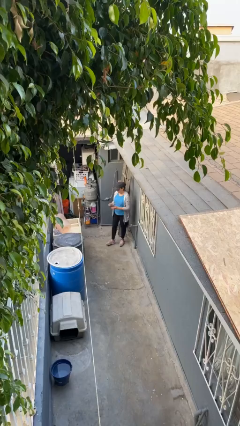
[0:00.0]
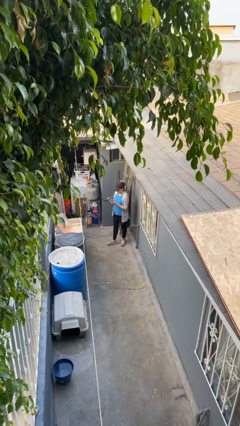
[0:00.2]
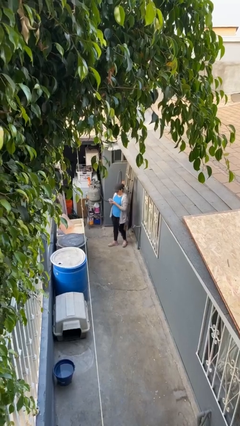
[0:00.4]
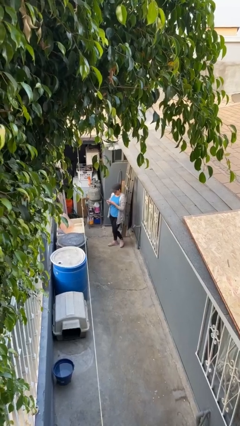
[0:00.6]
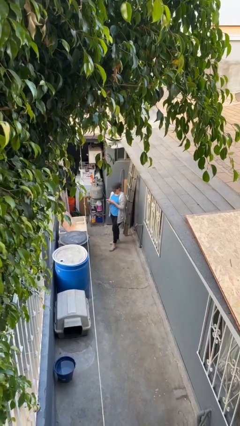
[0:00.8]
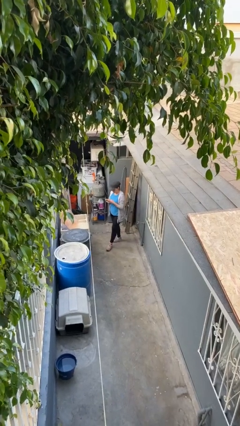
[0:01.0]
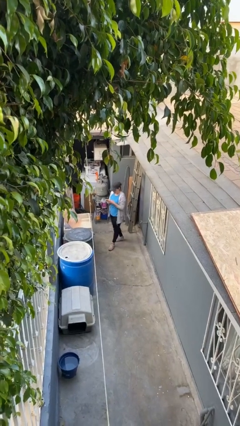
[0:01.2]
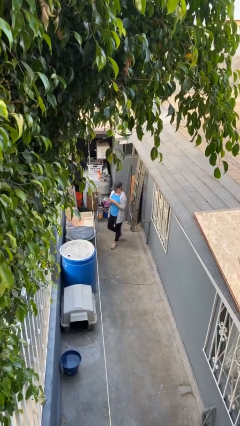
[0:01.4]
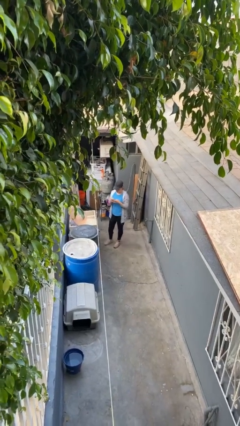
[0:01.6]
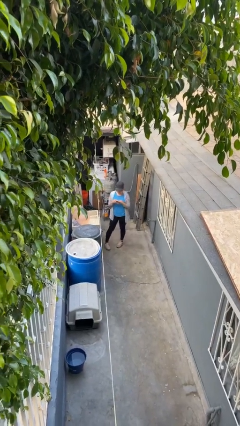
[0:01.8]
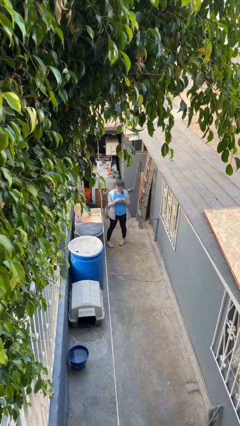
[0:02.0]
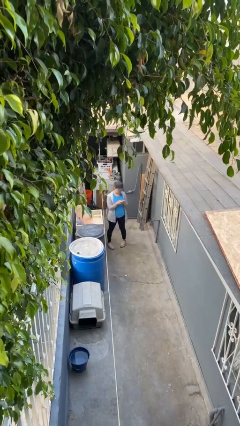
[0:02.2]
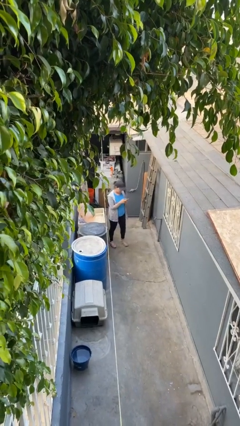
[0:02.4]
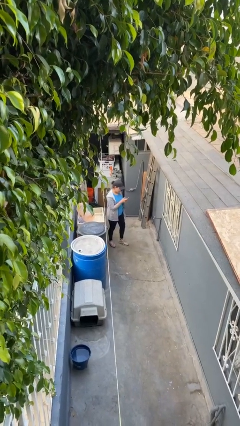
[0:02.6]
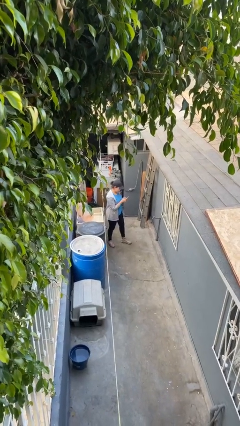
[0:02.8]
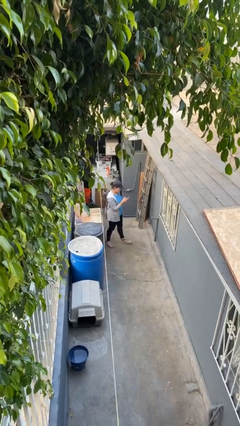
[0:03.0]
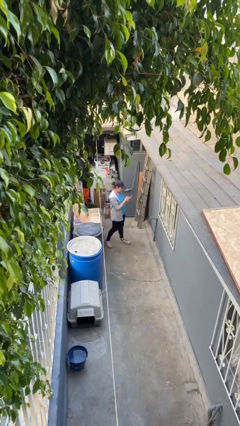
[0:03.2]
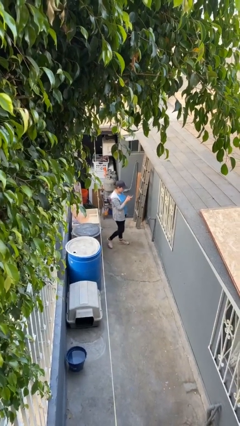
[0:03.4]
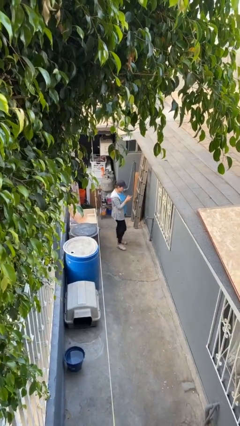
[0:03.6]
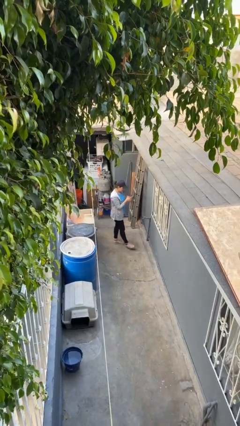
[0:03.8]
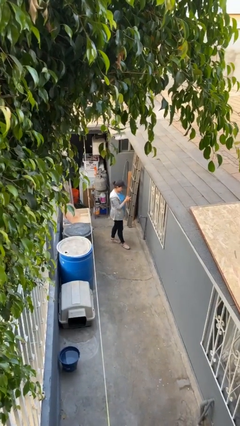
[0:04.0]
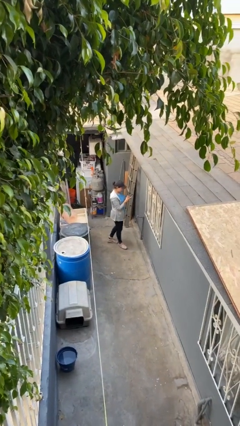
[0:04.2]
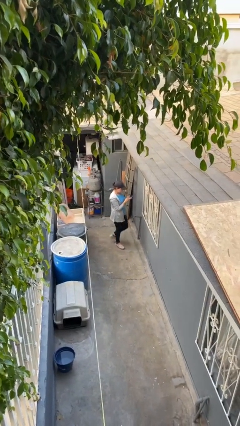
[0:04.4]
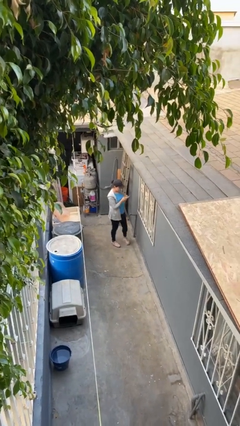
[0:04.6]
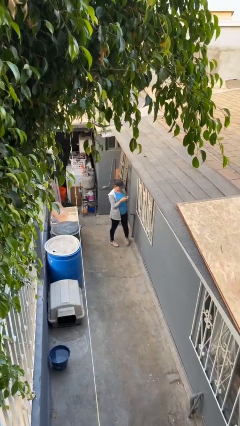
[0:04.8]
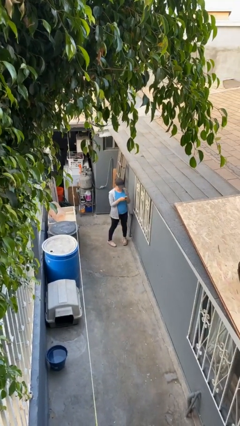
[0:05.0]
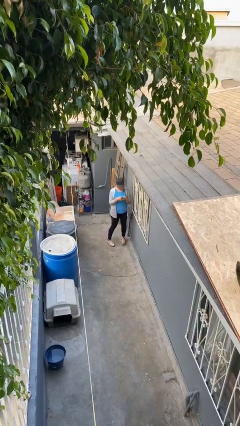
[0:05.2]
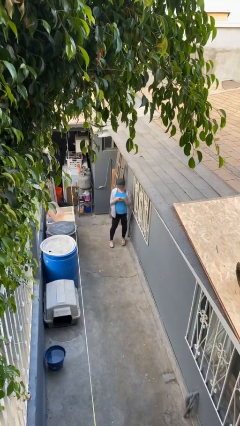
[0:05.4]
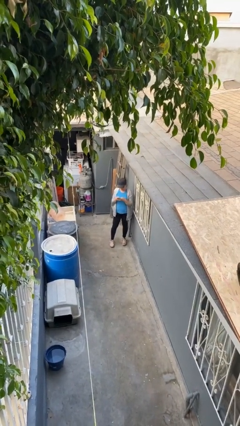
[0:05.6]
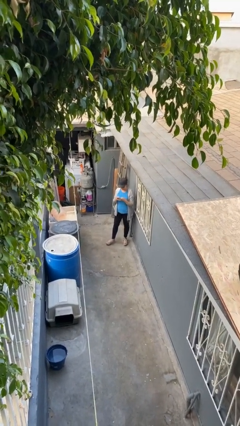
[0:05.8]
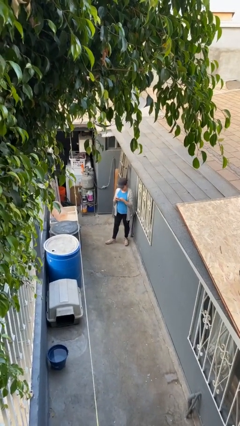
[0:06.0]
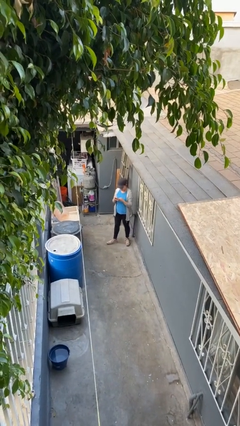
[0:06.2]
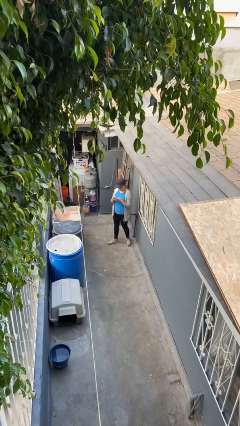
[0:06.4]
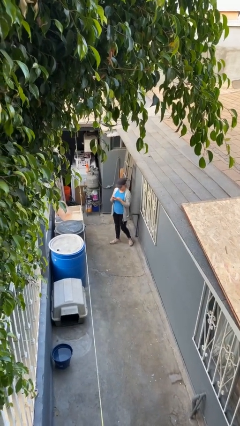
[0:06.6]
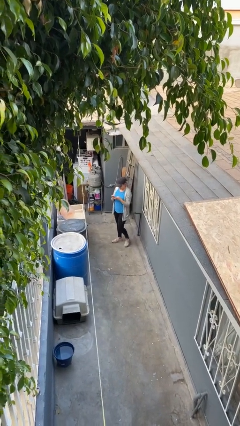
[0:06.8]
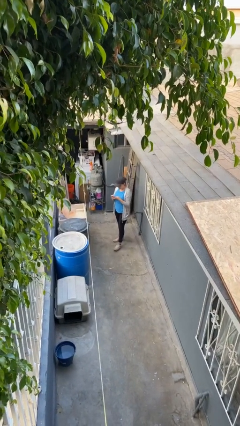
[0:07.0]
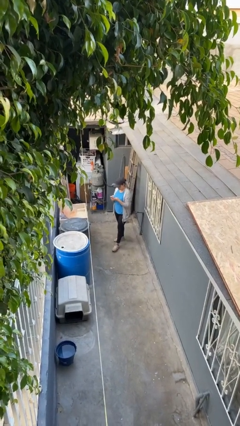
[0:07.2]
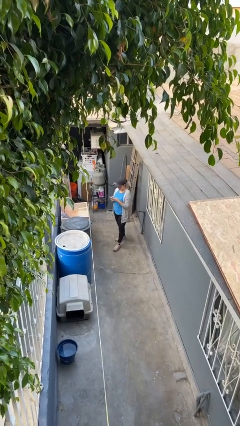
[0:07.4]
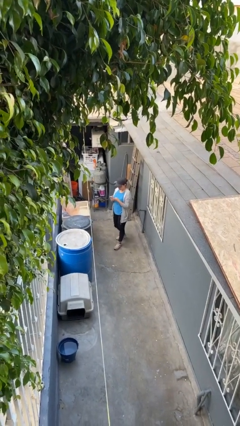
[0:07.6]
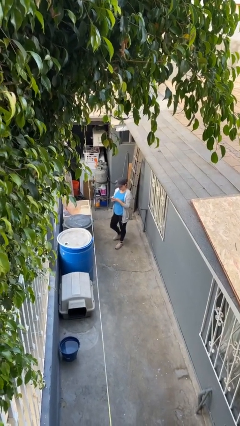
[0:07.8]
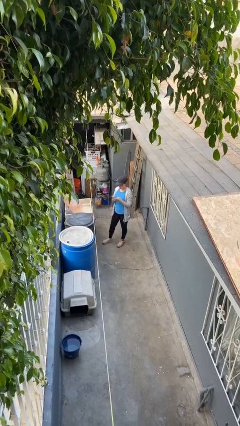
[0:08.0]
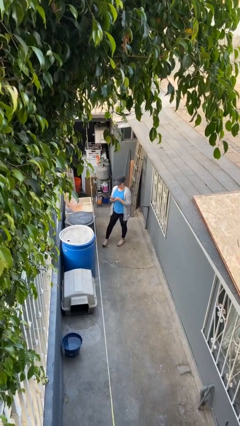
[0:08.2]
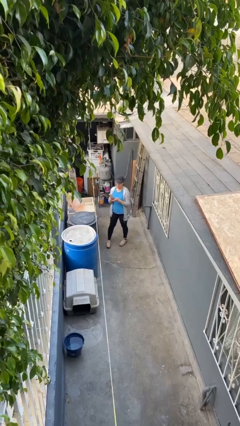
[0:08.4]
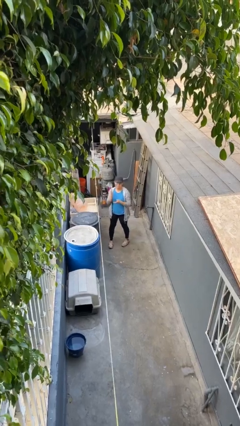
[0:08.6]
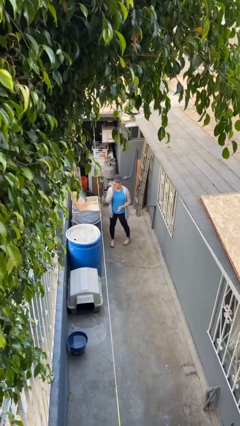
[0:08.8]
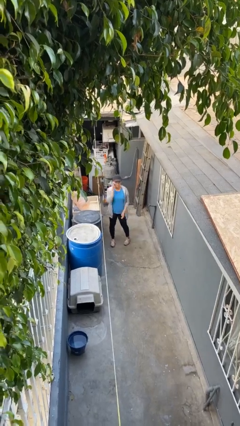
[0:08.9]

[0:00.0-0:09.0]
person texts on phone

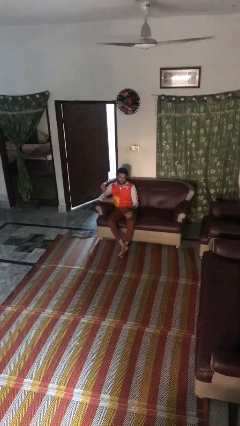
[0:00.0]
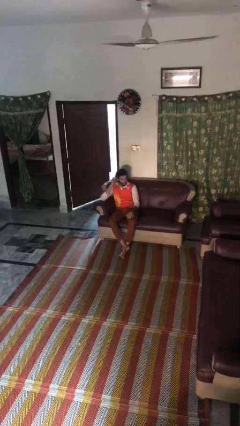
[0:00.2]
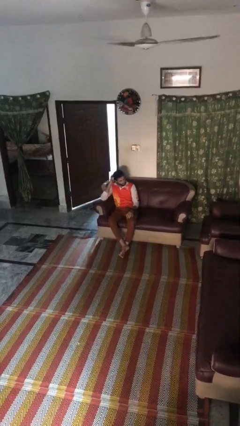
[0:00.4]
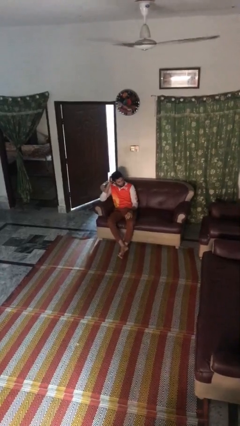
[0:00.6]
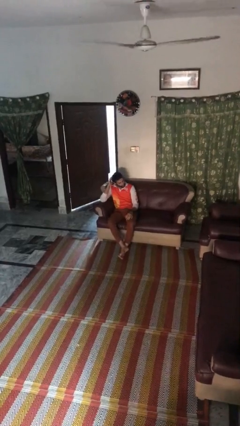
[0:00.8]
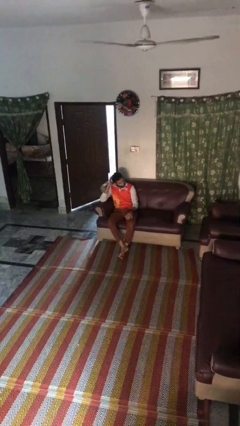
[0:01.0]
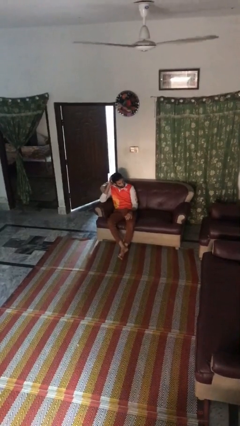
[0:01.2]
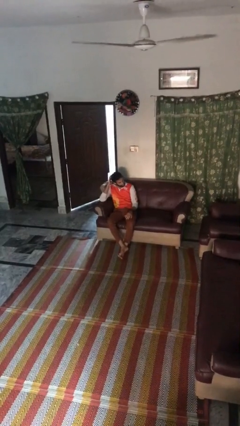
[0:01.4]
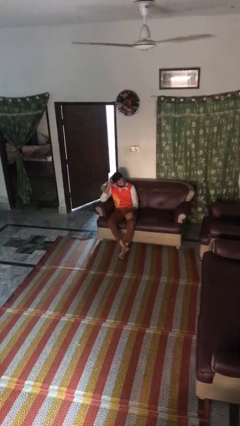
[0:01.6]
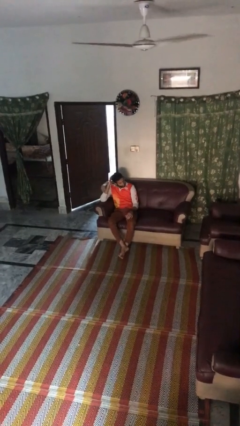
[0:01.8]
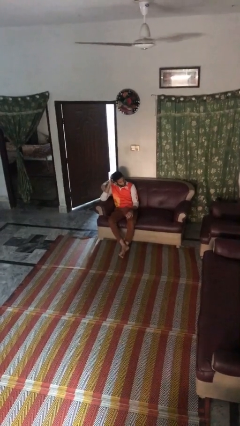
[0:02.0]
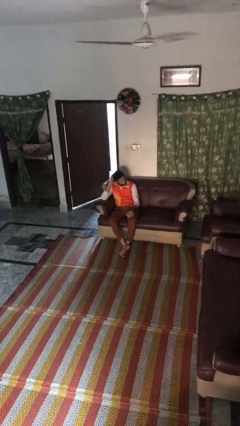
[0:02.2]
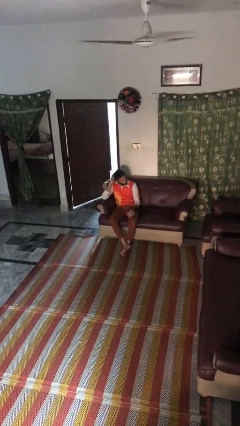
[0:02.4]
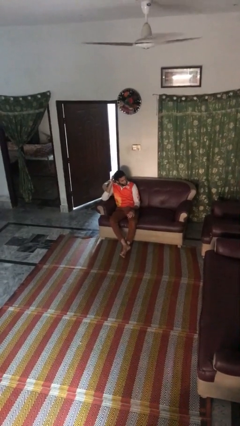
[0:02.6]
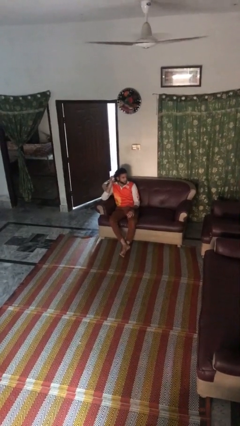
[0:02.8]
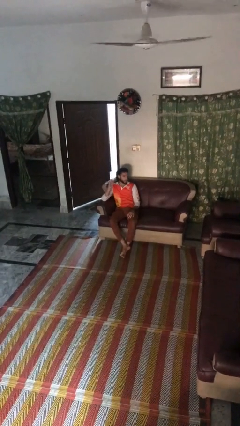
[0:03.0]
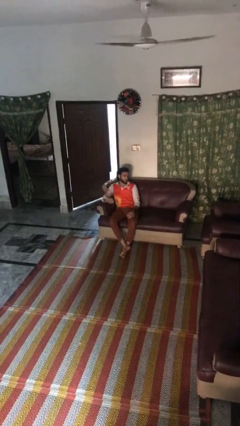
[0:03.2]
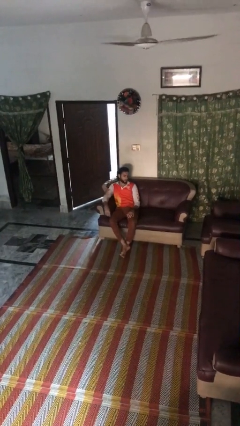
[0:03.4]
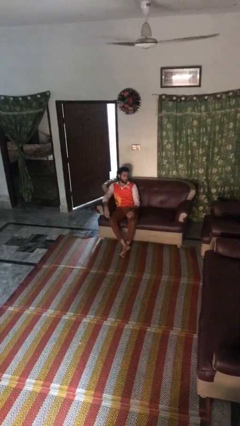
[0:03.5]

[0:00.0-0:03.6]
person scratches face

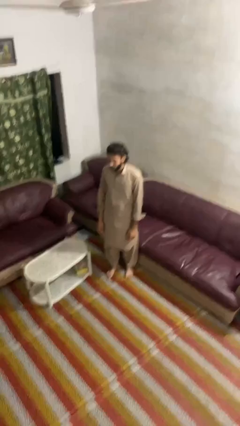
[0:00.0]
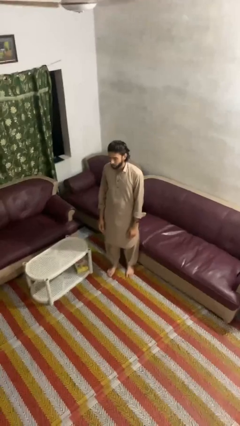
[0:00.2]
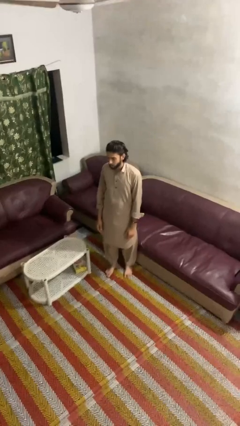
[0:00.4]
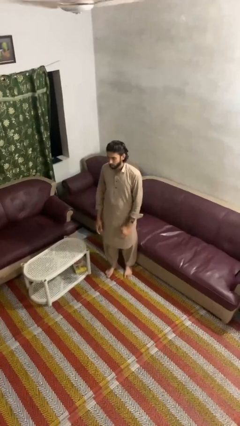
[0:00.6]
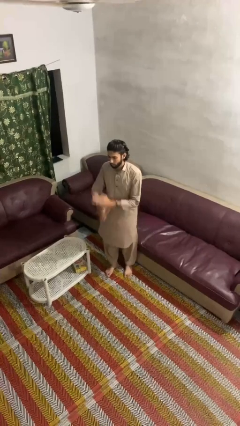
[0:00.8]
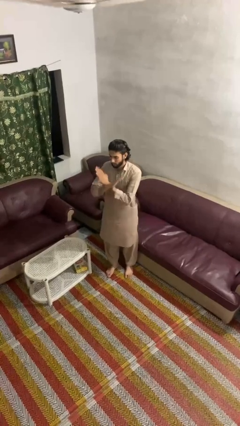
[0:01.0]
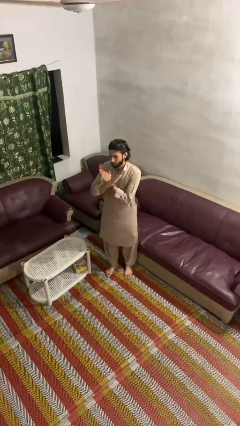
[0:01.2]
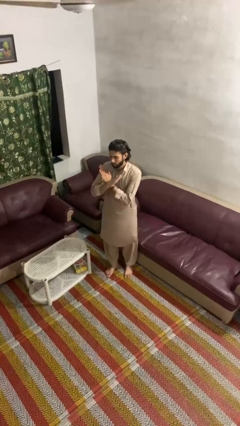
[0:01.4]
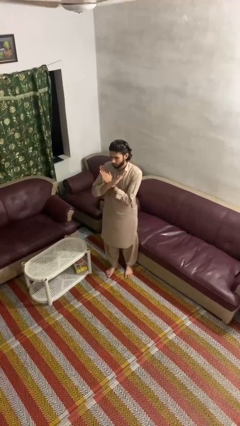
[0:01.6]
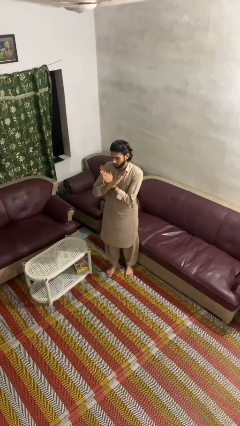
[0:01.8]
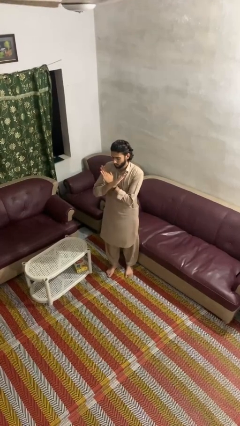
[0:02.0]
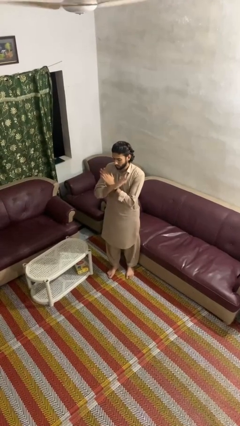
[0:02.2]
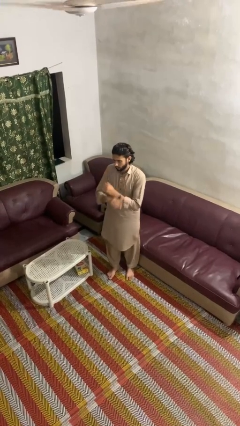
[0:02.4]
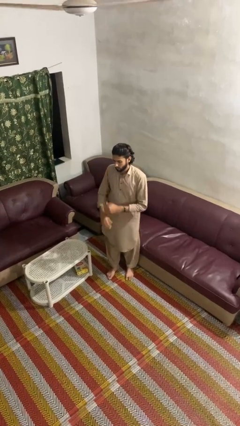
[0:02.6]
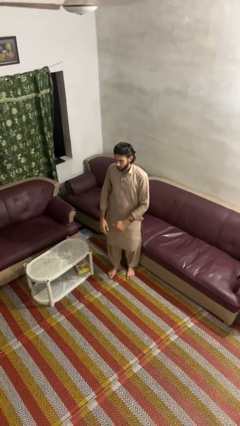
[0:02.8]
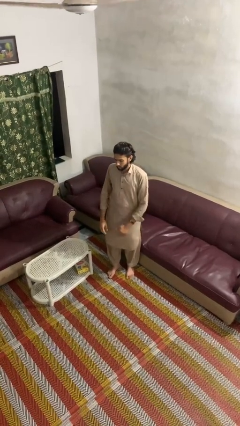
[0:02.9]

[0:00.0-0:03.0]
person gestures arms x

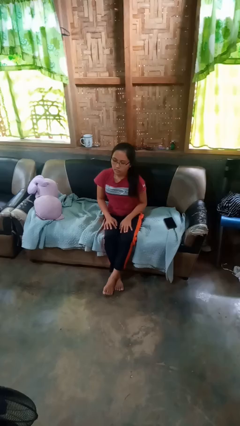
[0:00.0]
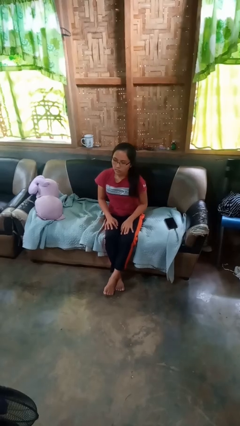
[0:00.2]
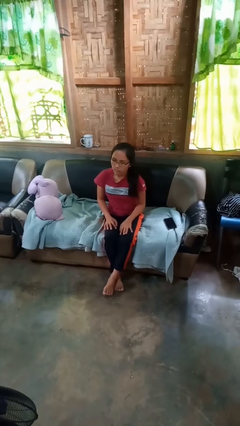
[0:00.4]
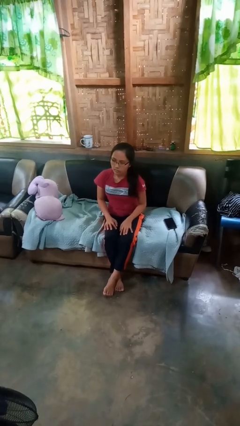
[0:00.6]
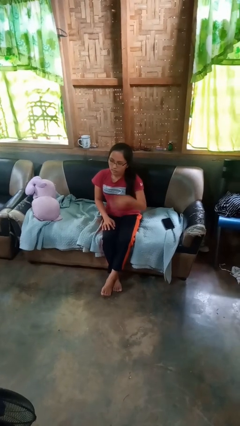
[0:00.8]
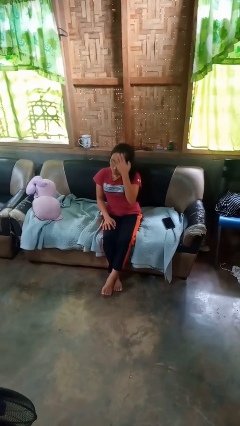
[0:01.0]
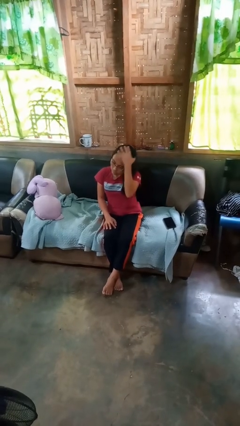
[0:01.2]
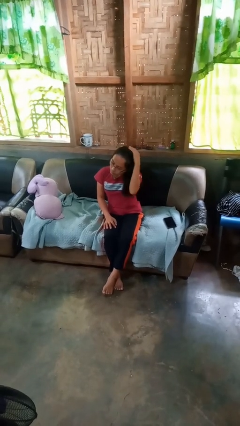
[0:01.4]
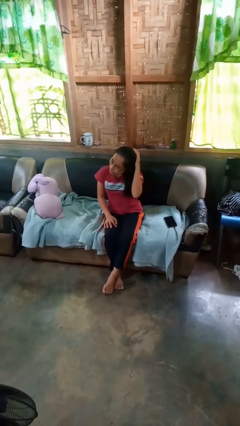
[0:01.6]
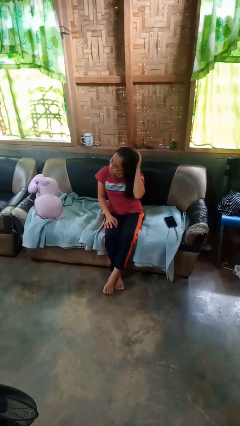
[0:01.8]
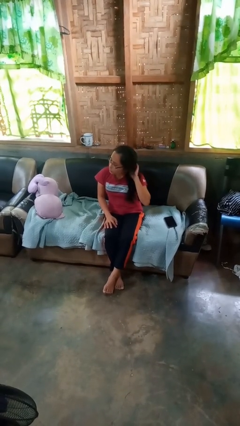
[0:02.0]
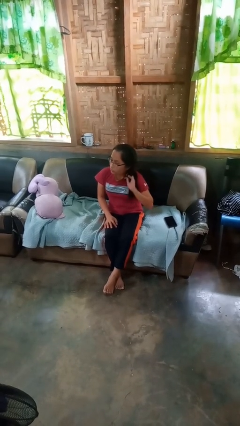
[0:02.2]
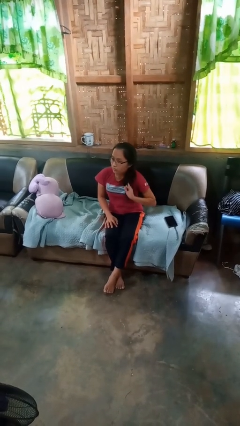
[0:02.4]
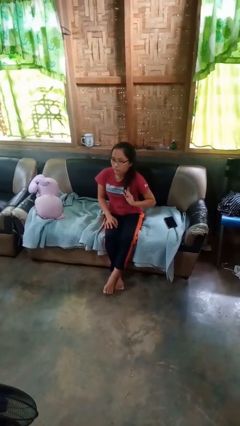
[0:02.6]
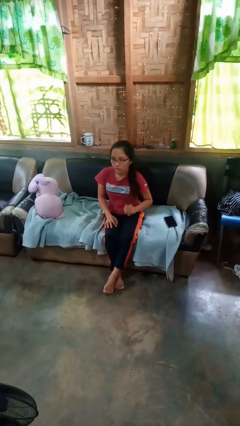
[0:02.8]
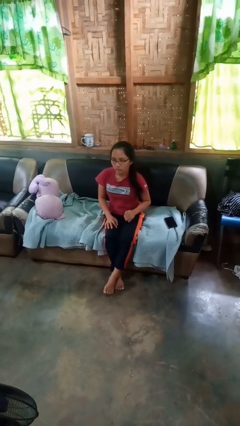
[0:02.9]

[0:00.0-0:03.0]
person strokes hair
